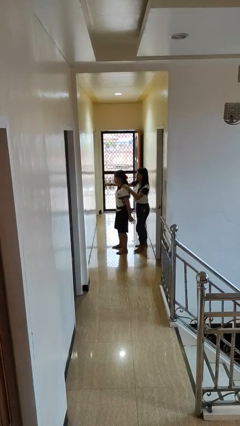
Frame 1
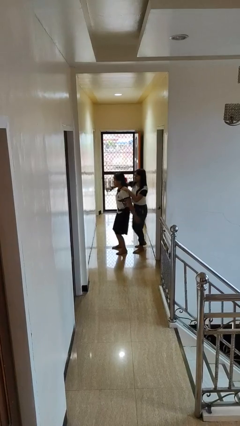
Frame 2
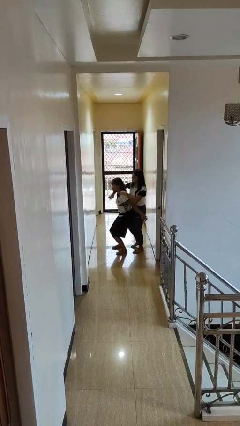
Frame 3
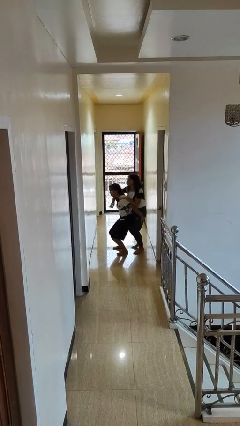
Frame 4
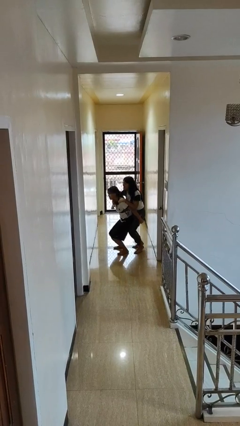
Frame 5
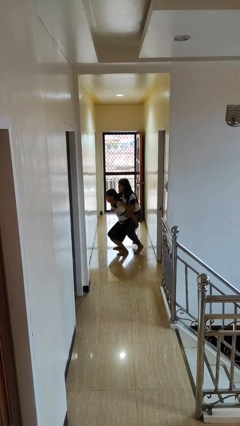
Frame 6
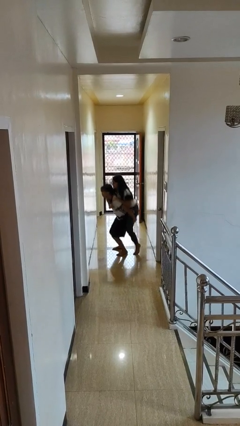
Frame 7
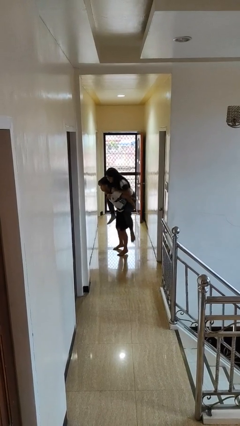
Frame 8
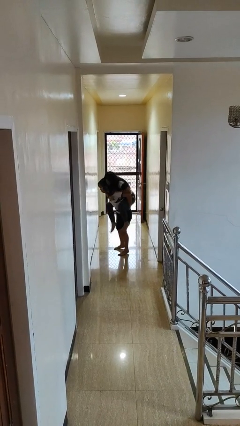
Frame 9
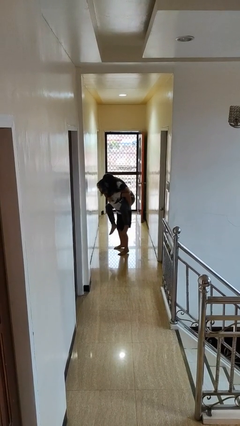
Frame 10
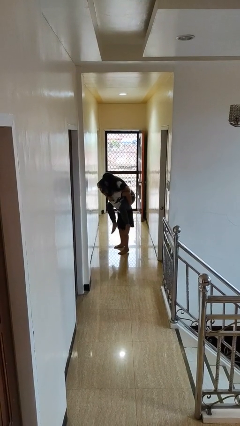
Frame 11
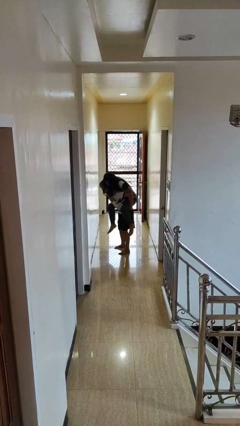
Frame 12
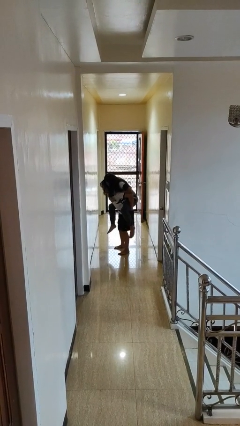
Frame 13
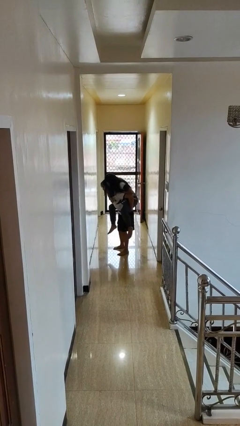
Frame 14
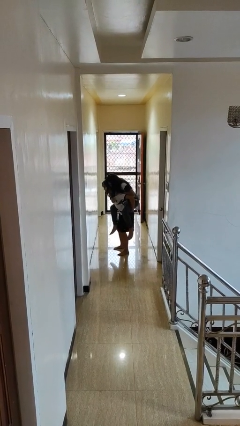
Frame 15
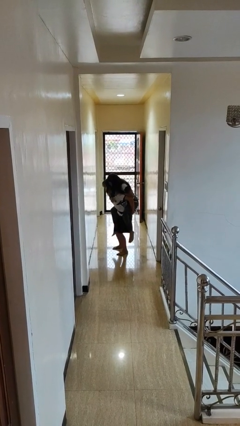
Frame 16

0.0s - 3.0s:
person carries person over shoulder

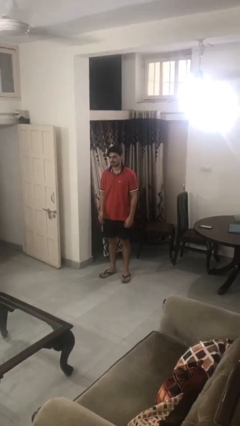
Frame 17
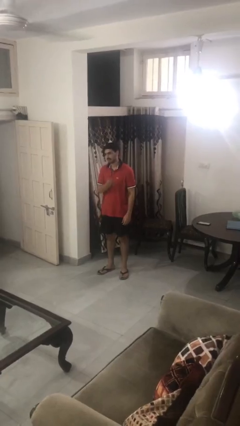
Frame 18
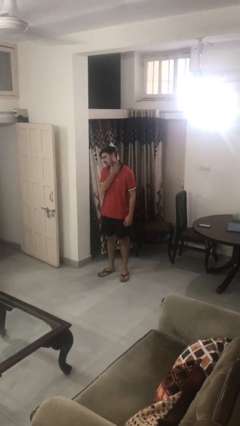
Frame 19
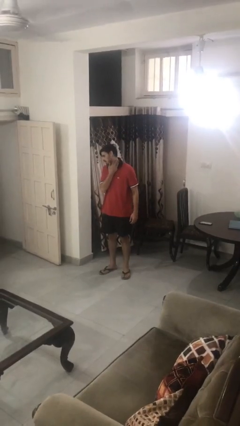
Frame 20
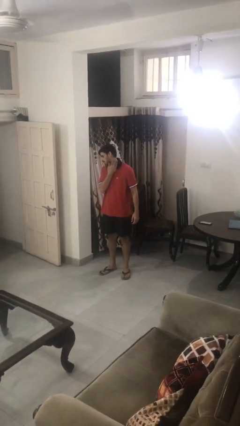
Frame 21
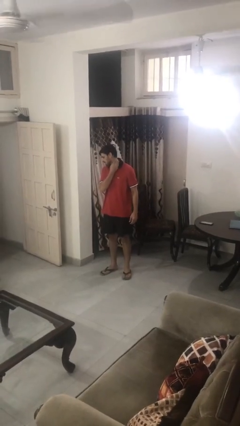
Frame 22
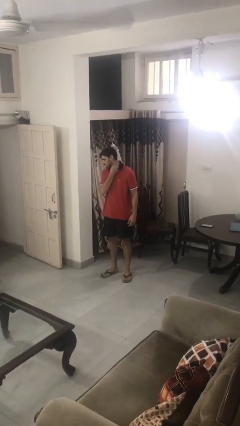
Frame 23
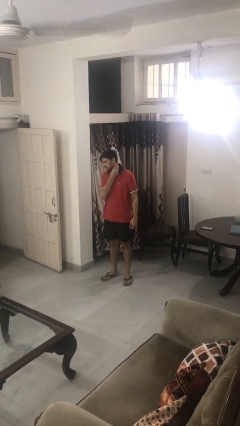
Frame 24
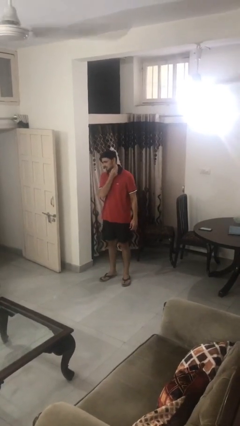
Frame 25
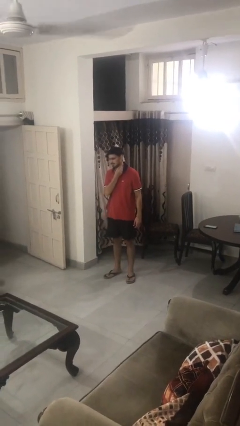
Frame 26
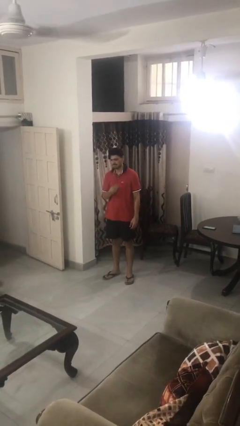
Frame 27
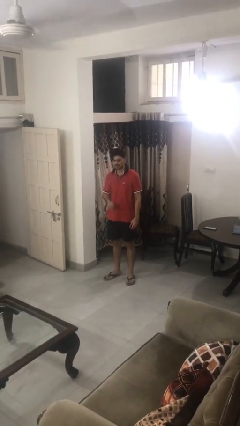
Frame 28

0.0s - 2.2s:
person swats bug

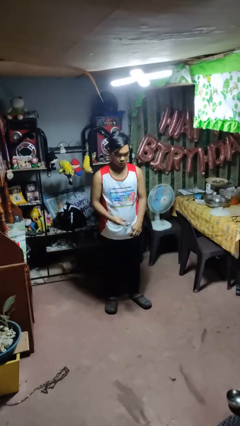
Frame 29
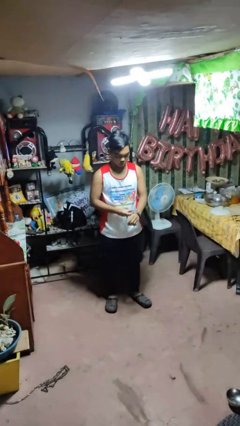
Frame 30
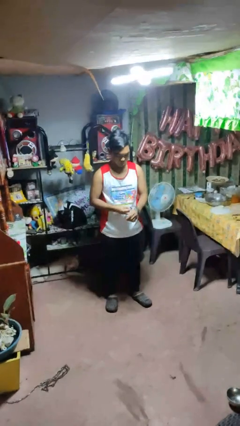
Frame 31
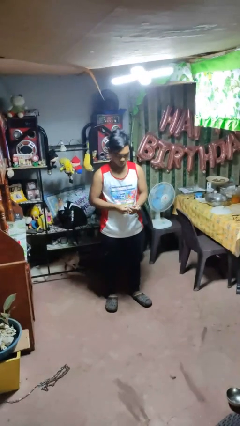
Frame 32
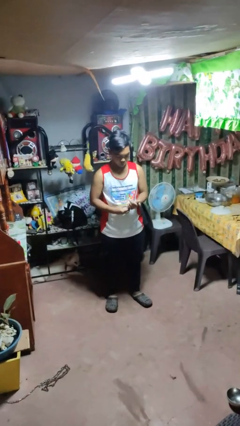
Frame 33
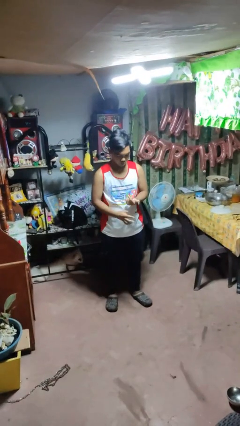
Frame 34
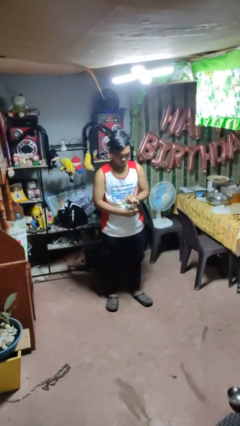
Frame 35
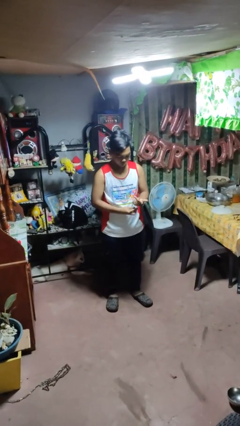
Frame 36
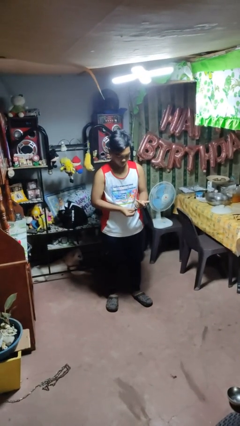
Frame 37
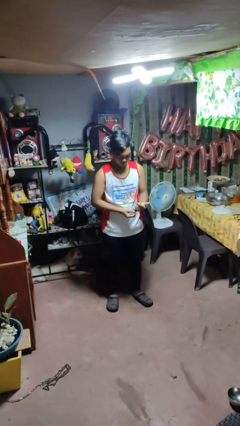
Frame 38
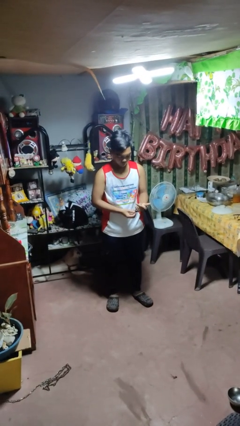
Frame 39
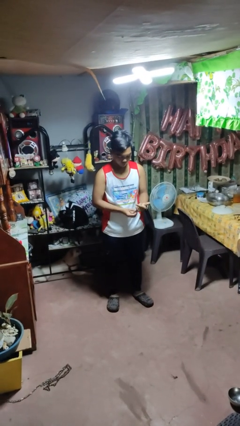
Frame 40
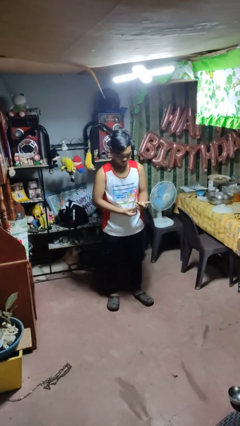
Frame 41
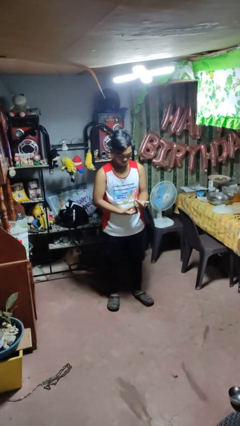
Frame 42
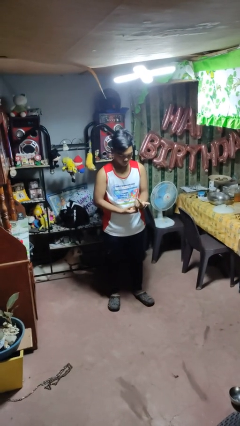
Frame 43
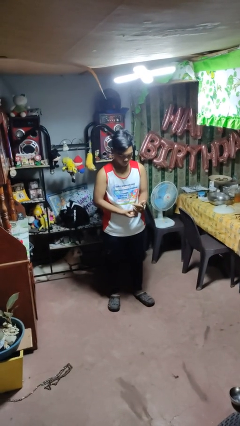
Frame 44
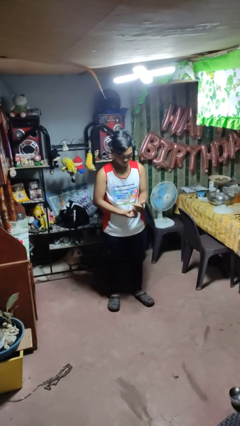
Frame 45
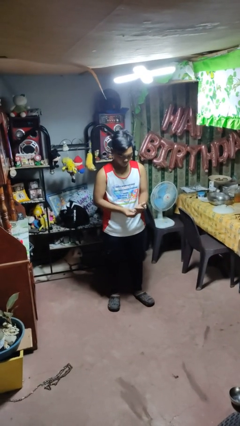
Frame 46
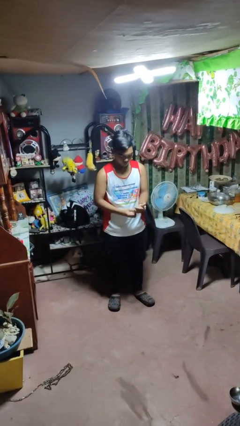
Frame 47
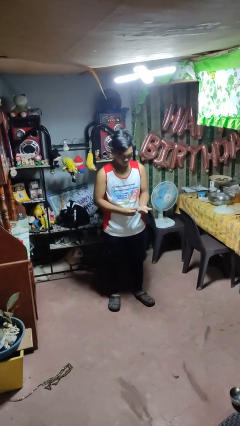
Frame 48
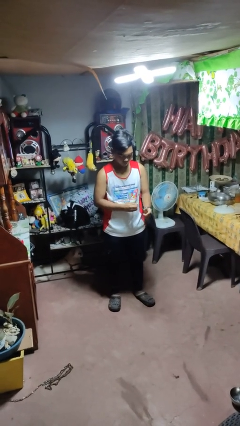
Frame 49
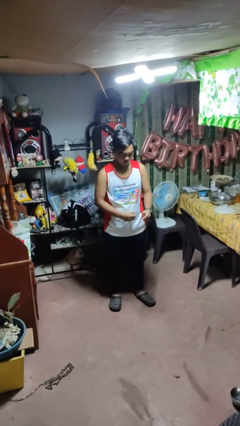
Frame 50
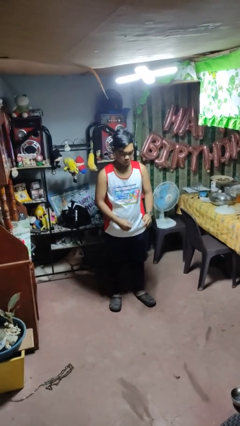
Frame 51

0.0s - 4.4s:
person puts on wristwatch

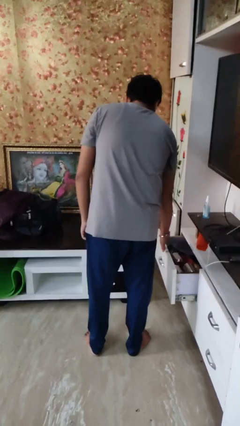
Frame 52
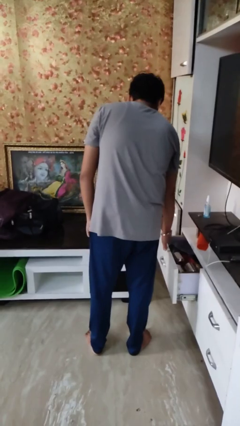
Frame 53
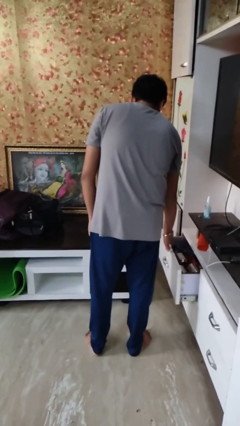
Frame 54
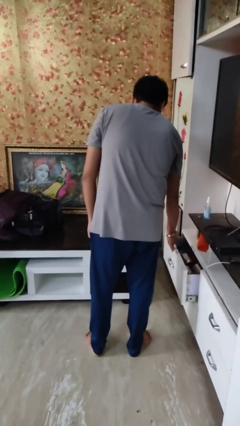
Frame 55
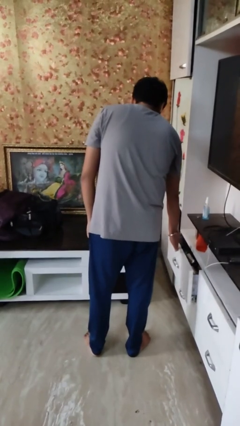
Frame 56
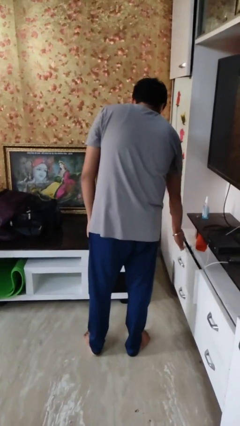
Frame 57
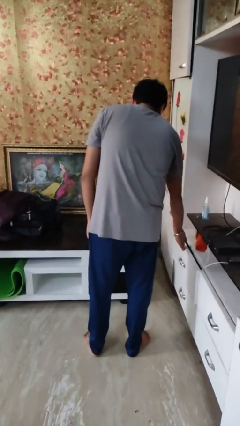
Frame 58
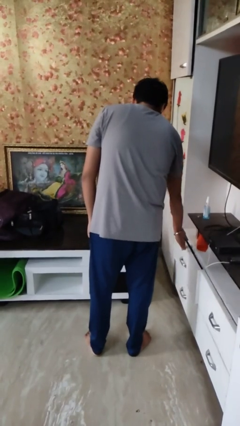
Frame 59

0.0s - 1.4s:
person closes kitchen drawer

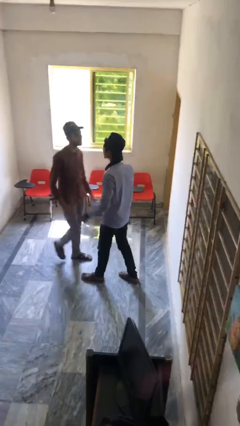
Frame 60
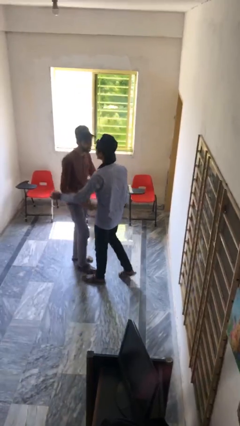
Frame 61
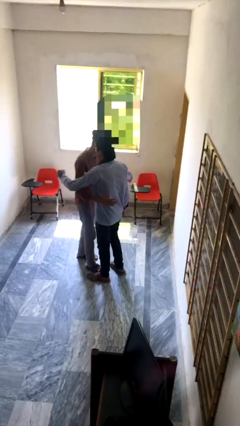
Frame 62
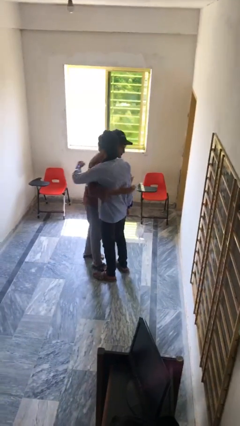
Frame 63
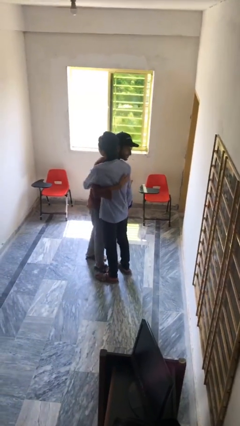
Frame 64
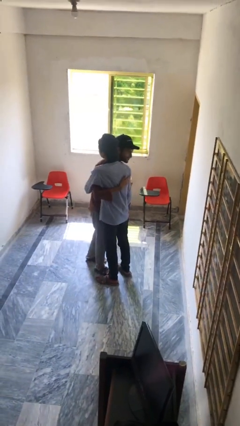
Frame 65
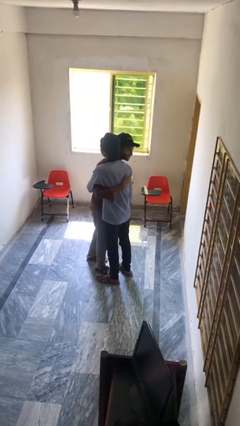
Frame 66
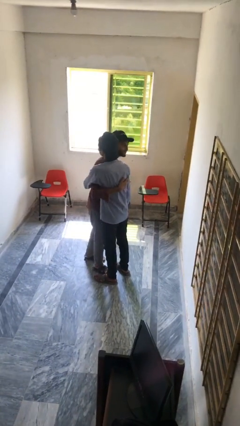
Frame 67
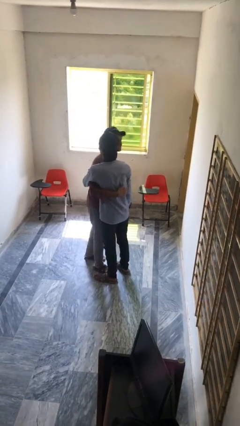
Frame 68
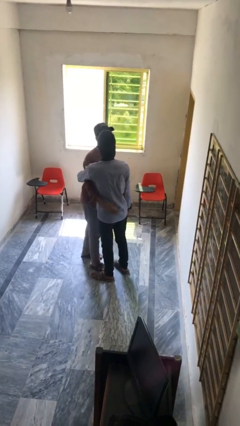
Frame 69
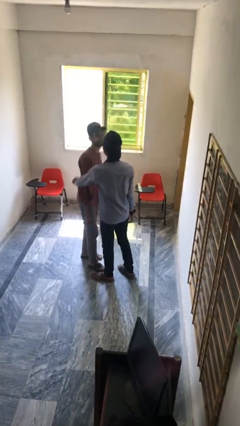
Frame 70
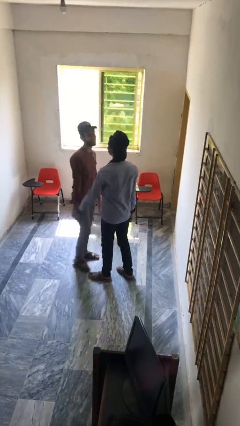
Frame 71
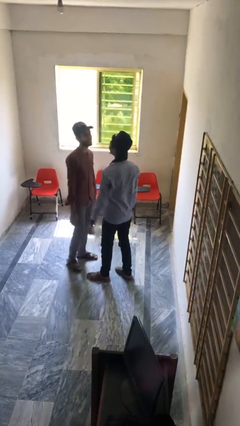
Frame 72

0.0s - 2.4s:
person embraces person

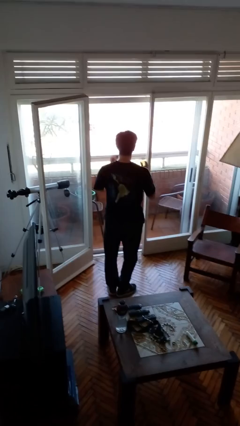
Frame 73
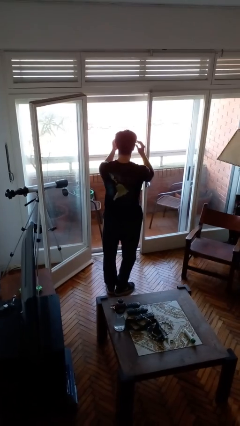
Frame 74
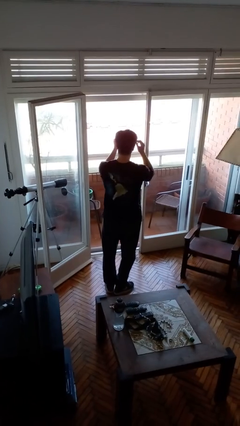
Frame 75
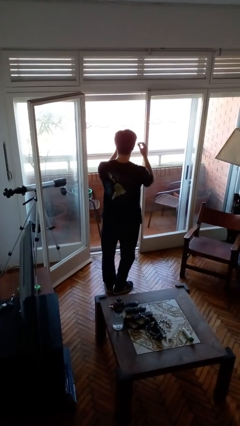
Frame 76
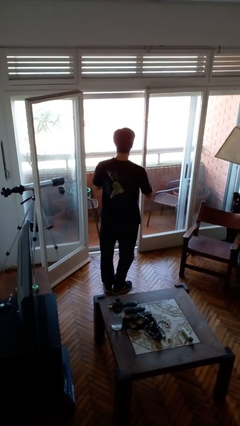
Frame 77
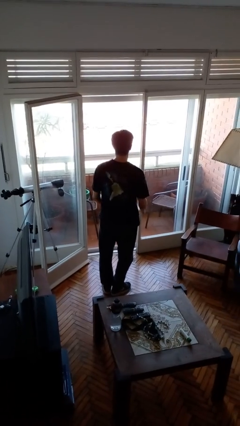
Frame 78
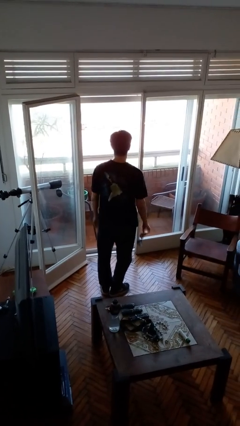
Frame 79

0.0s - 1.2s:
person takes off sunglasses

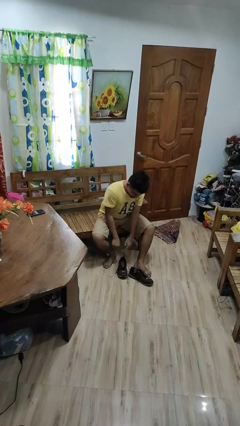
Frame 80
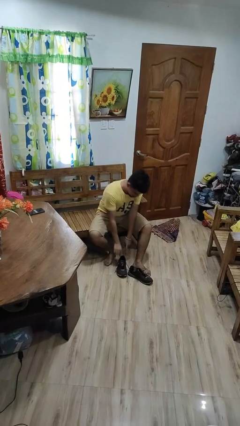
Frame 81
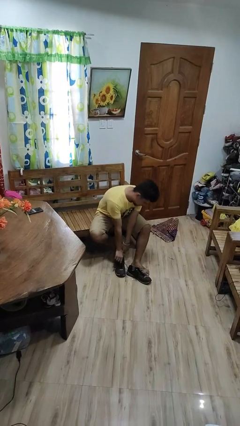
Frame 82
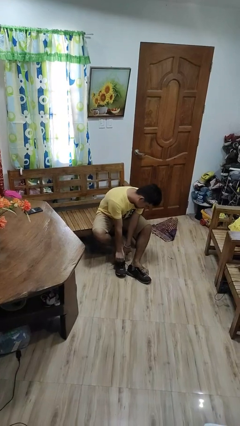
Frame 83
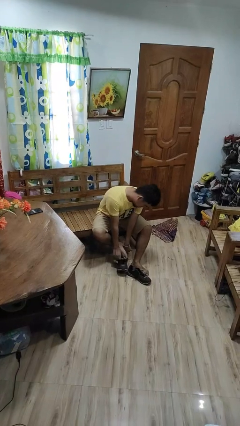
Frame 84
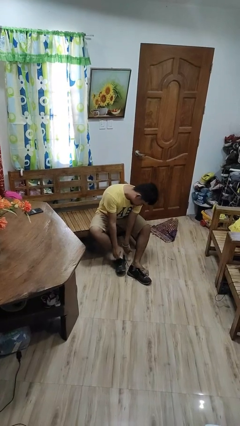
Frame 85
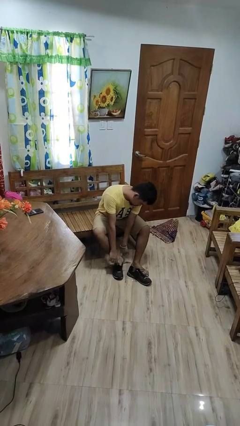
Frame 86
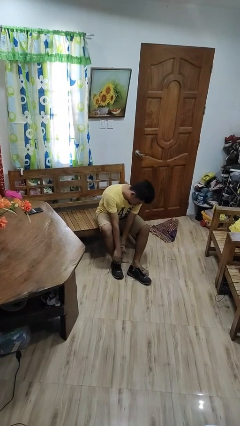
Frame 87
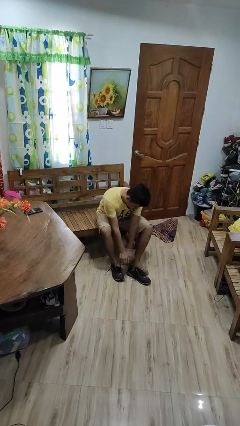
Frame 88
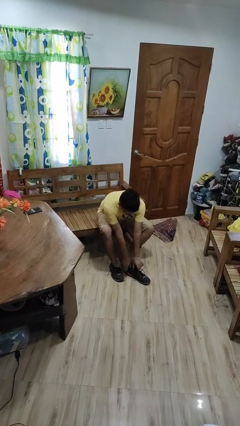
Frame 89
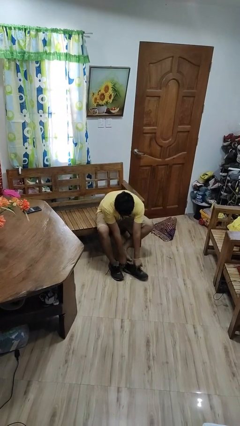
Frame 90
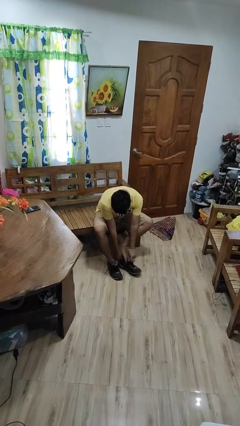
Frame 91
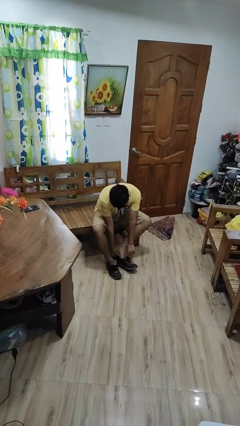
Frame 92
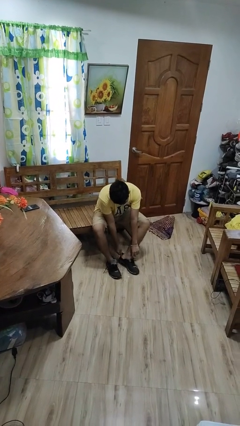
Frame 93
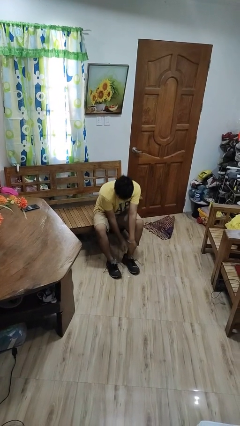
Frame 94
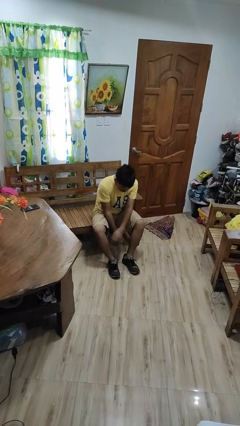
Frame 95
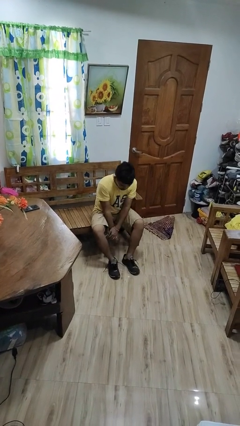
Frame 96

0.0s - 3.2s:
person puts on shoes
